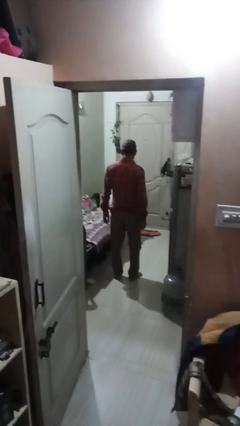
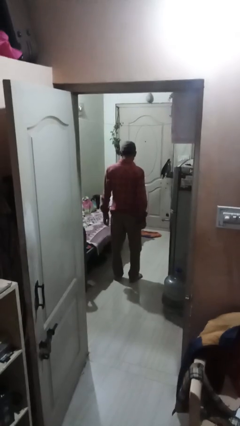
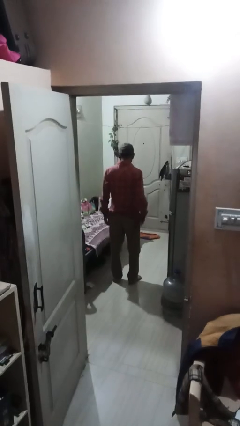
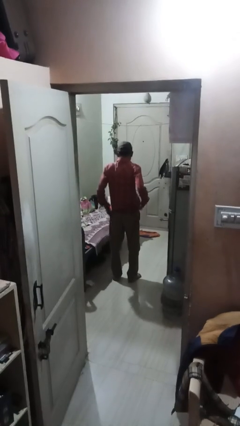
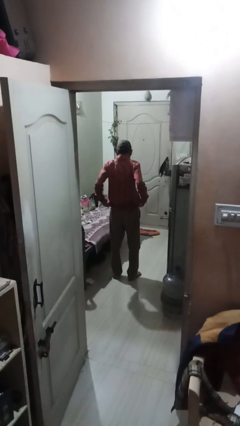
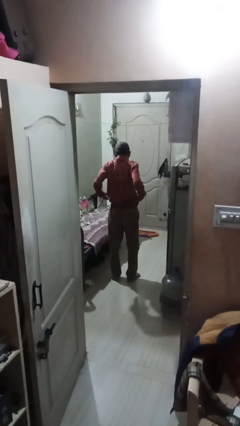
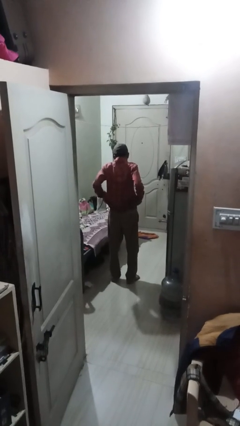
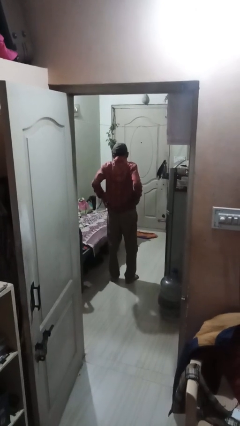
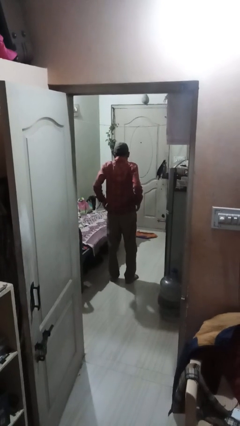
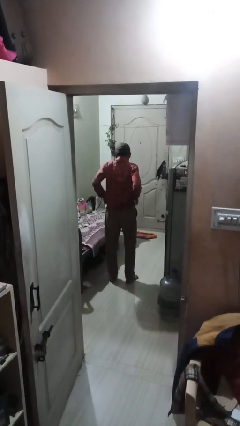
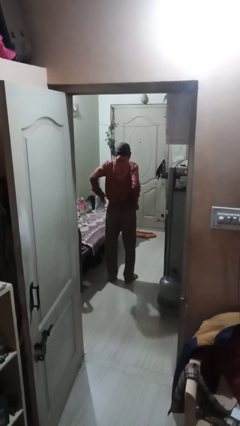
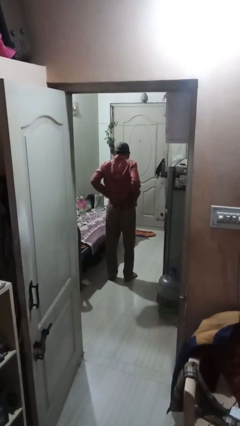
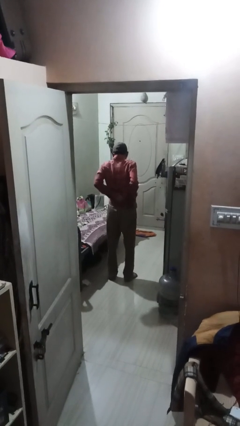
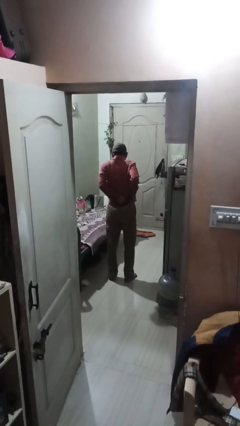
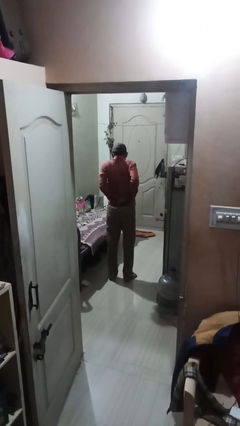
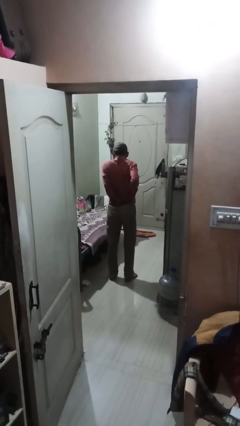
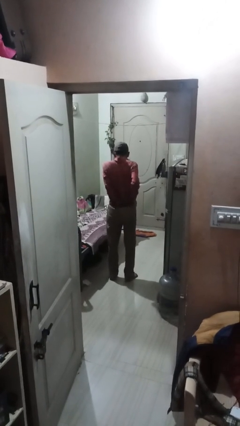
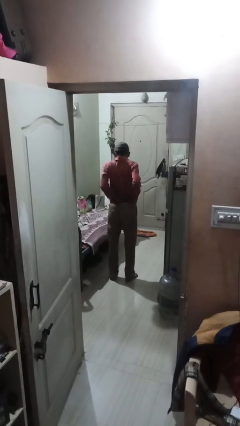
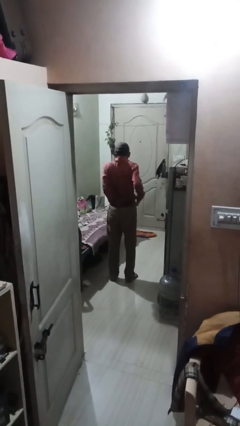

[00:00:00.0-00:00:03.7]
person tucks in shirt

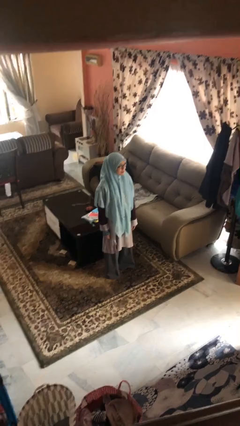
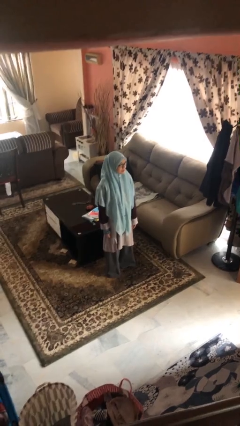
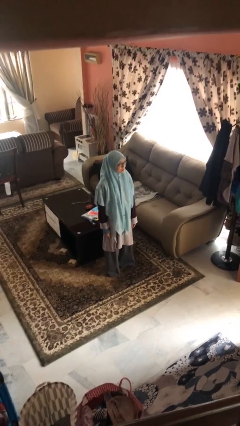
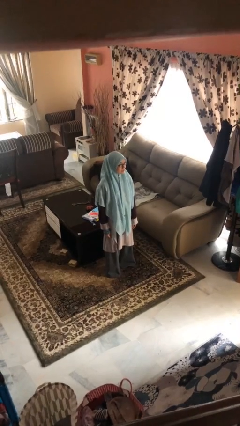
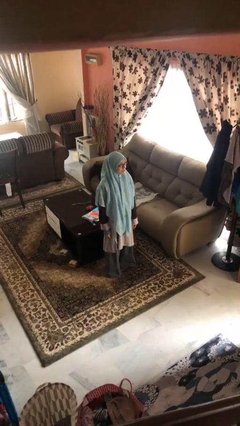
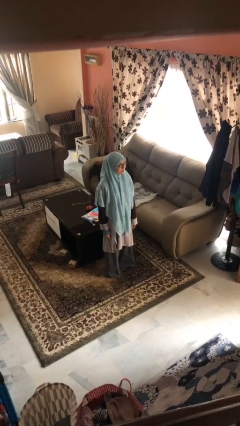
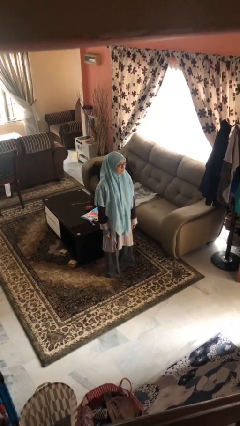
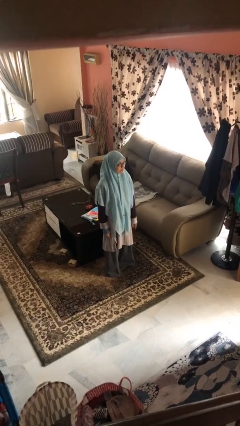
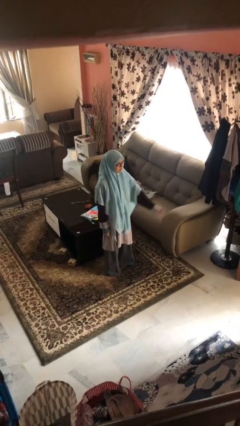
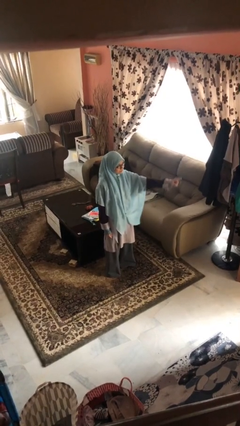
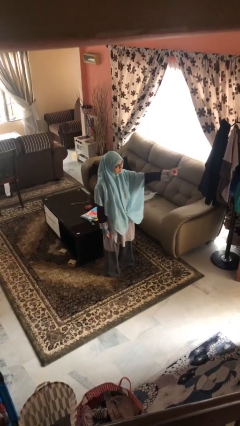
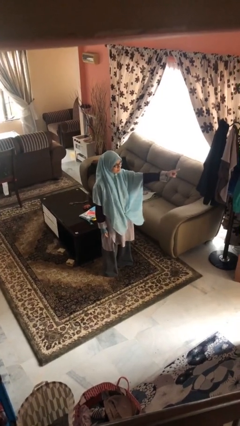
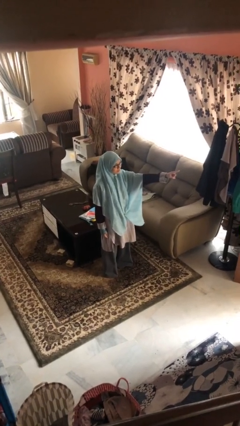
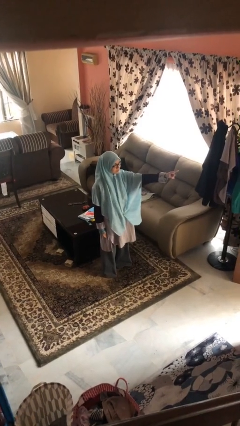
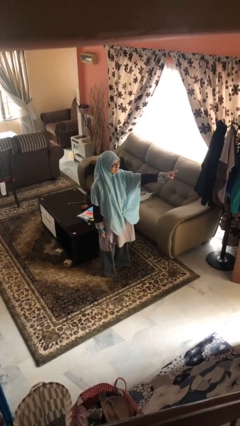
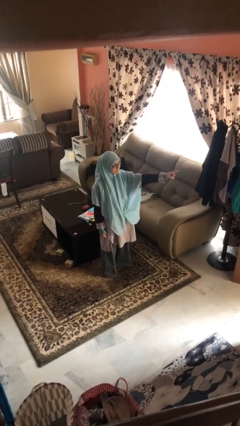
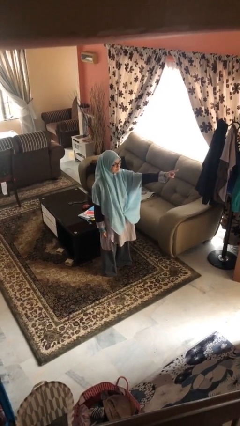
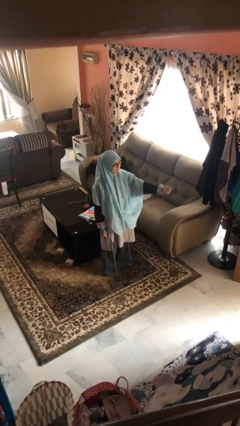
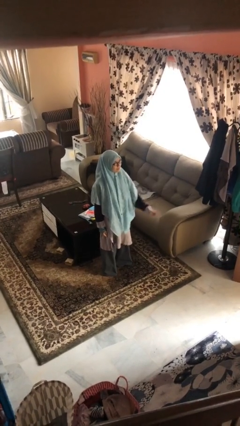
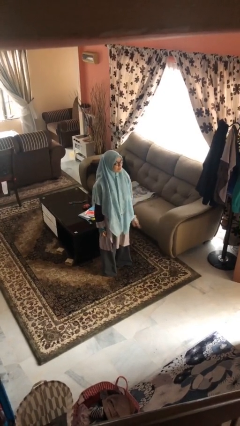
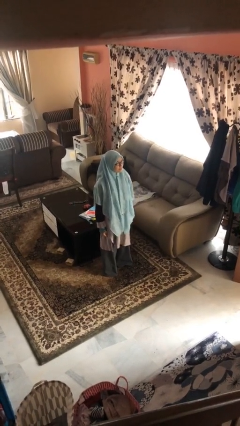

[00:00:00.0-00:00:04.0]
person points at person

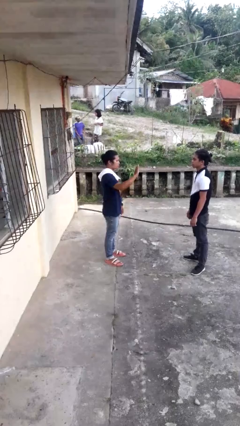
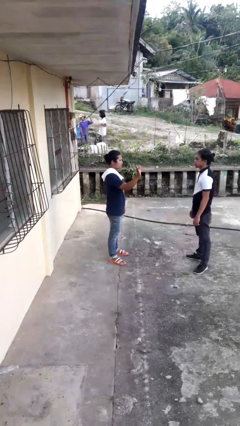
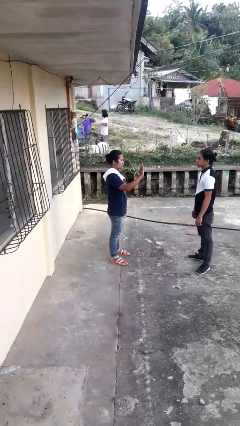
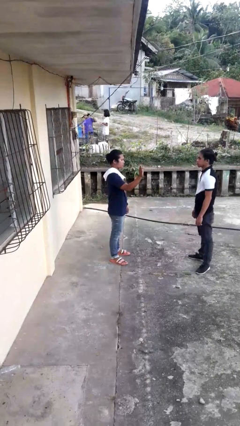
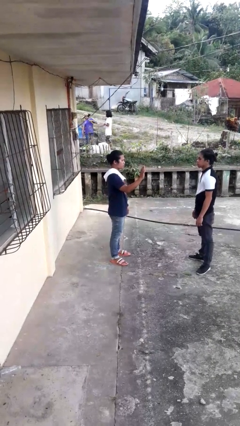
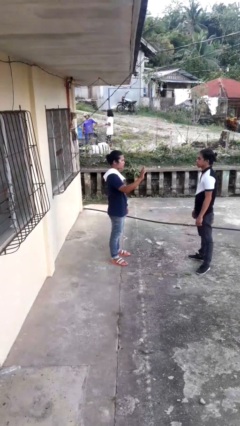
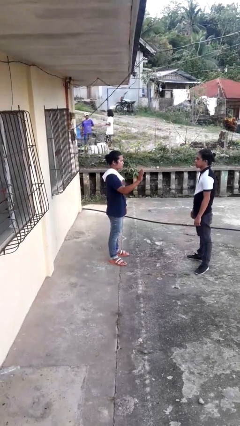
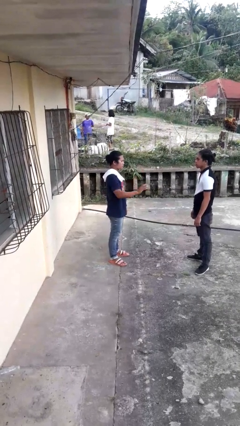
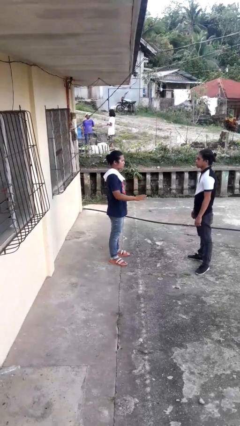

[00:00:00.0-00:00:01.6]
person waves at person

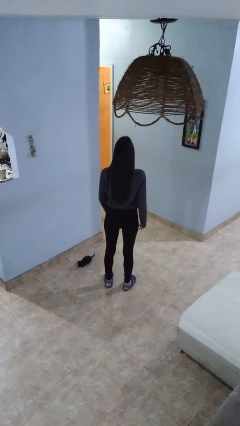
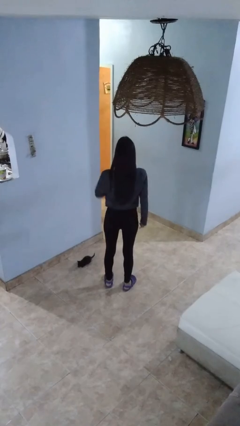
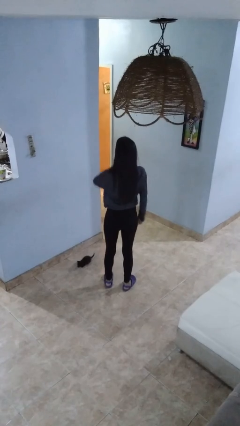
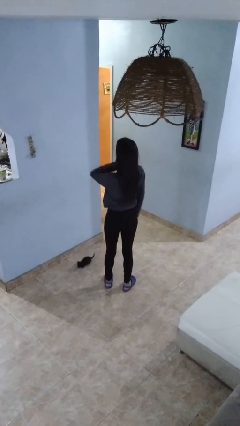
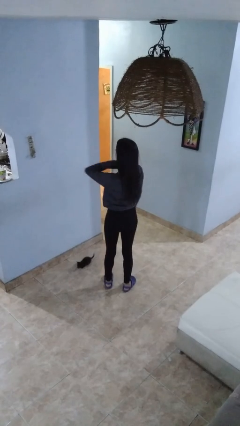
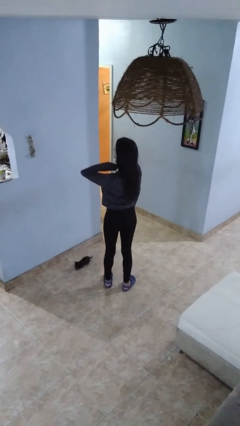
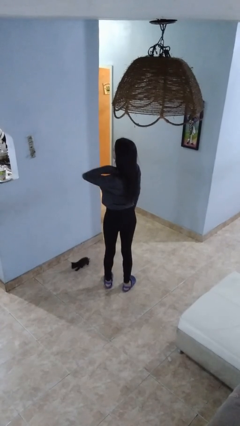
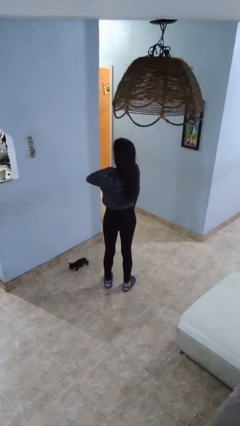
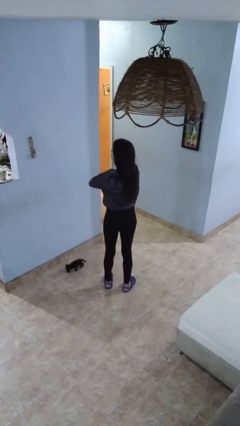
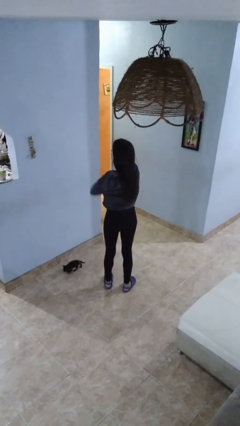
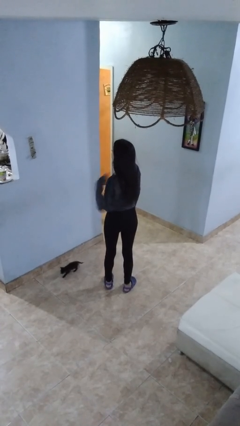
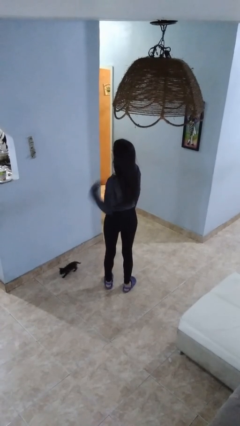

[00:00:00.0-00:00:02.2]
person gestures cut

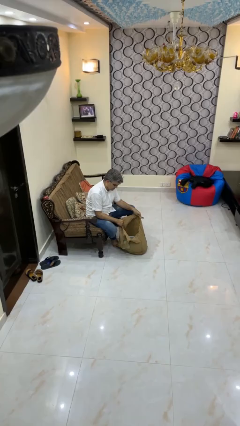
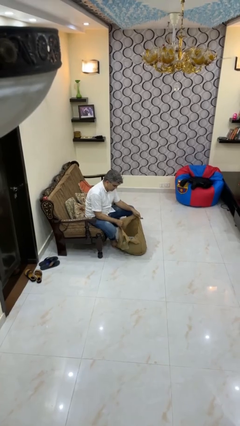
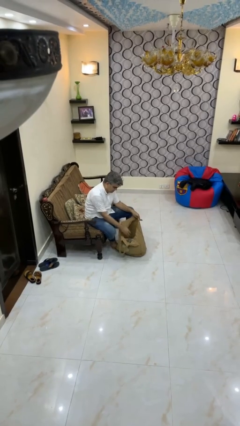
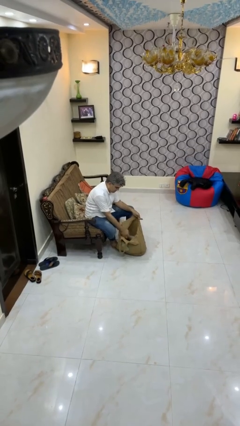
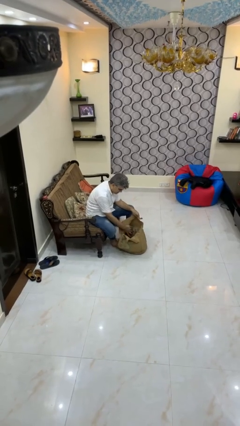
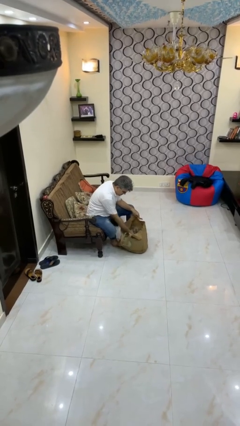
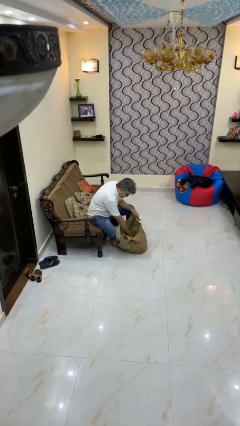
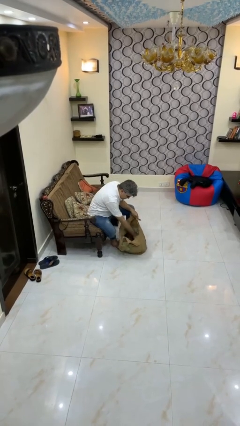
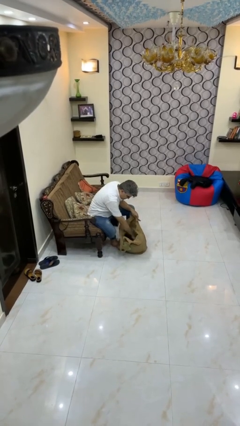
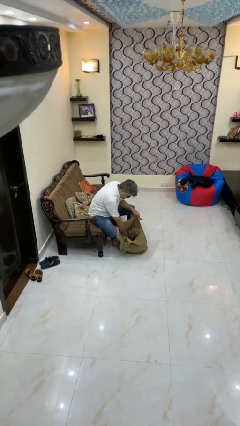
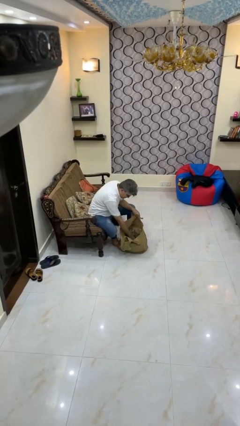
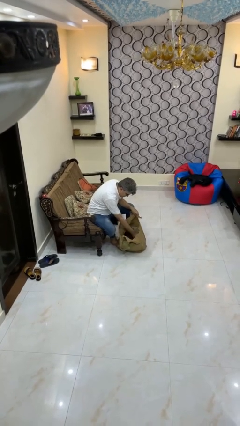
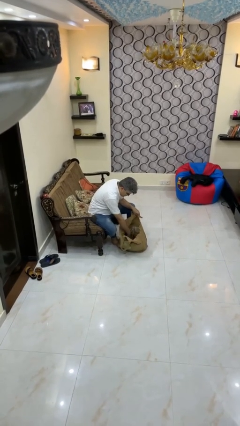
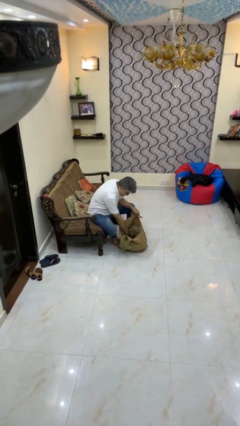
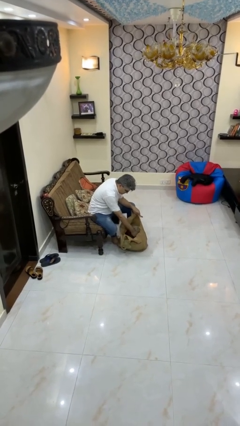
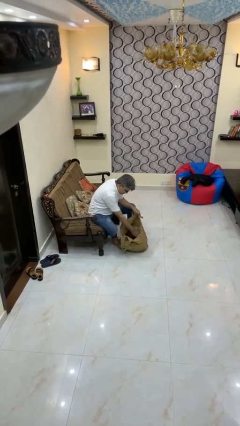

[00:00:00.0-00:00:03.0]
person searches in bag

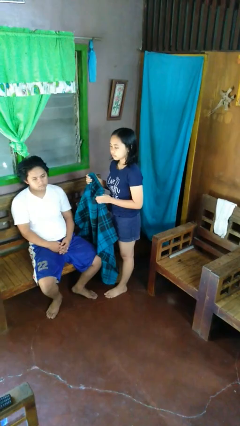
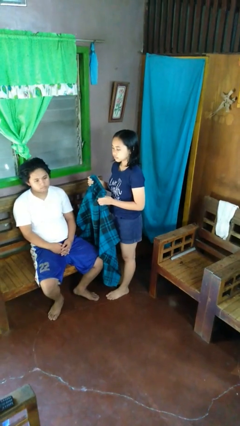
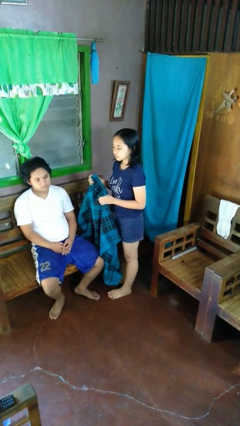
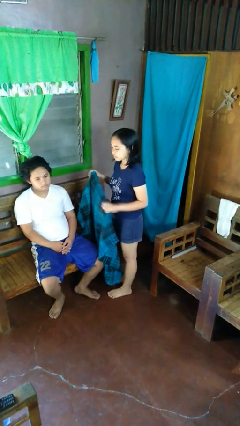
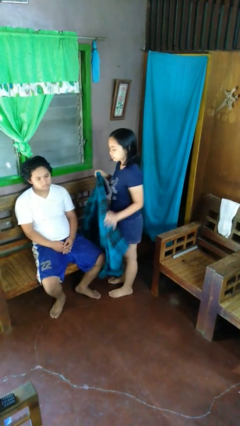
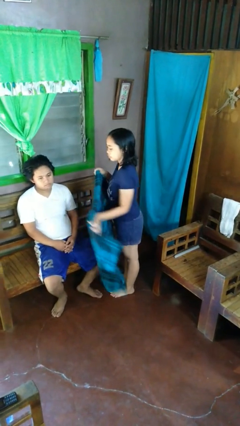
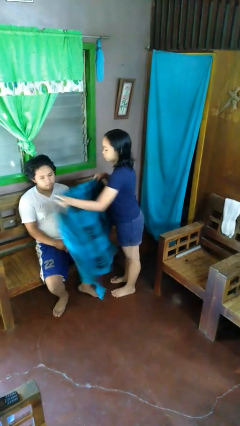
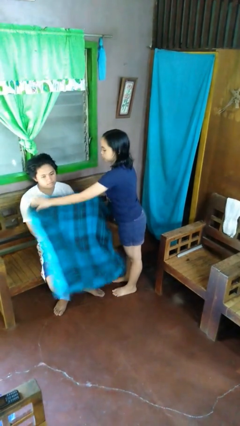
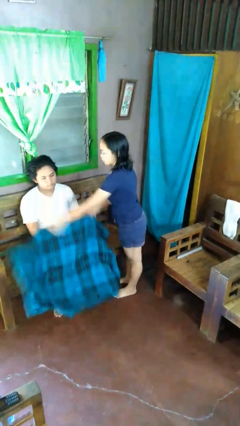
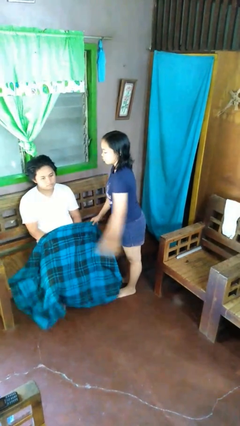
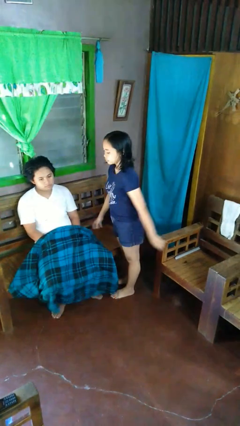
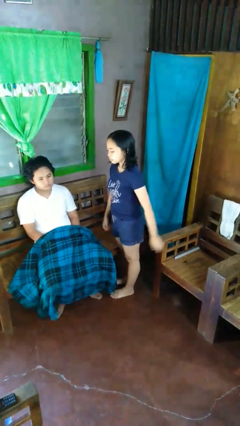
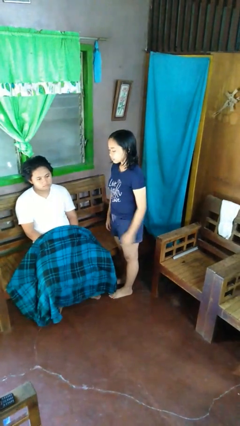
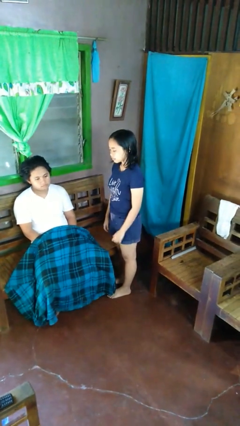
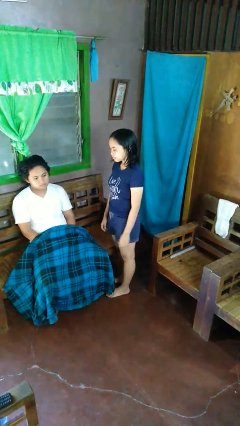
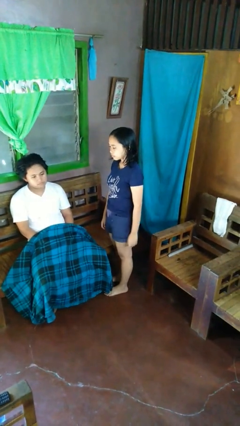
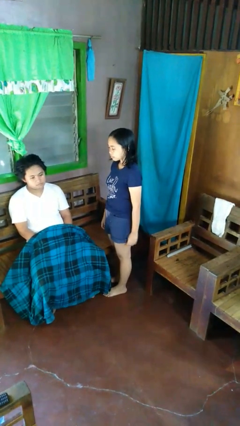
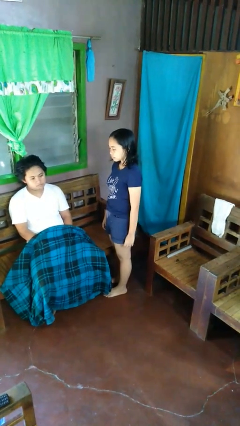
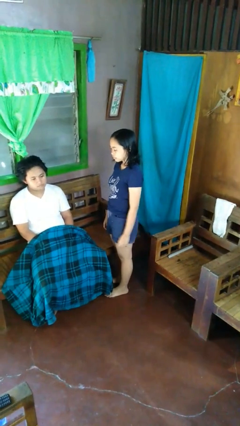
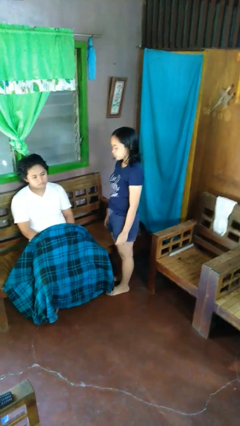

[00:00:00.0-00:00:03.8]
person covers friend with blanket
